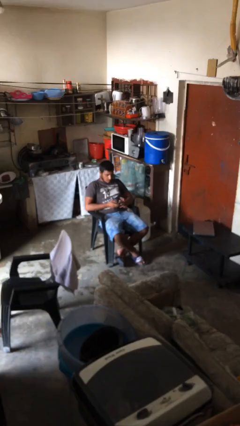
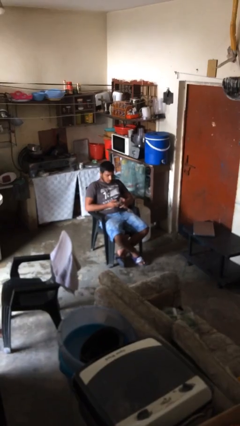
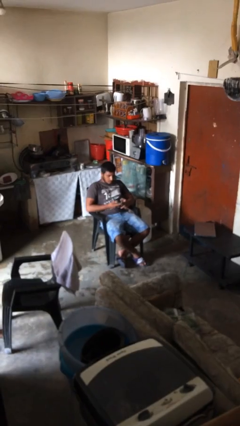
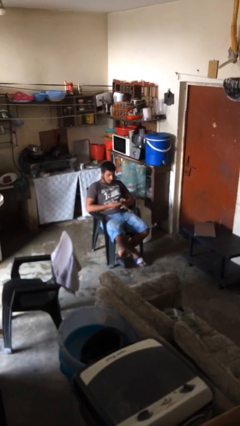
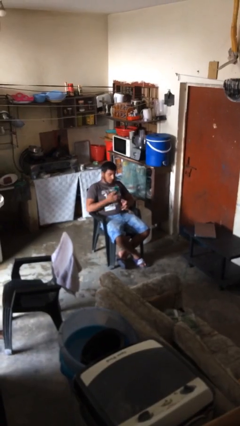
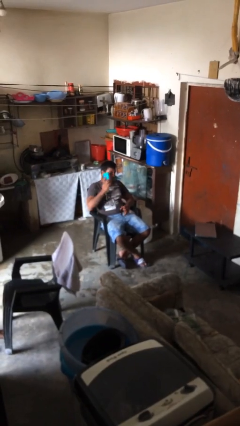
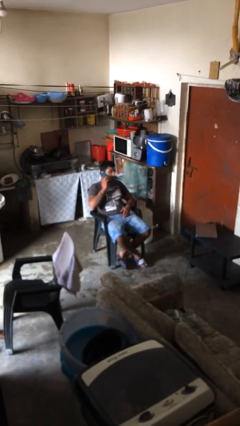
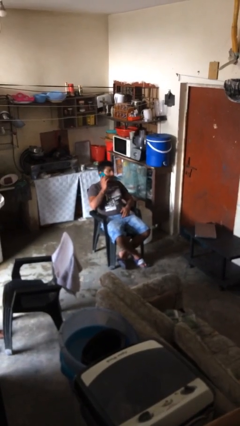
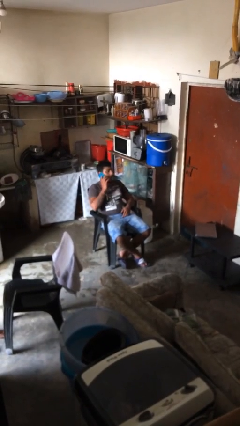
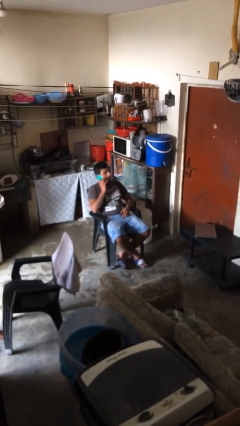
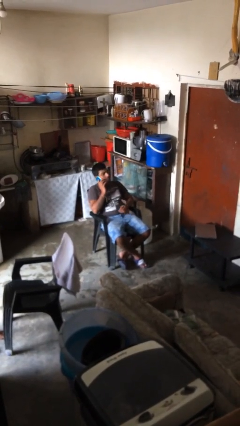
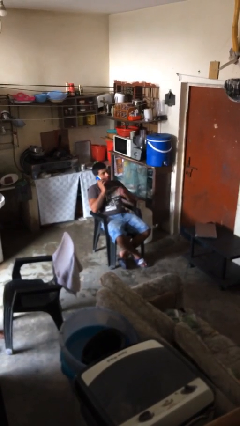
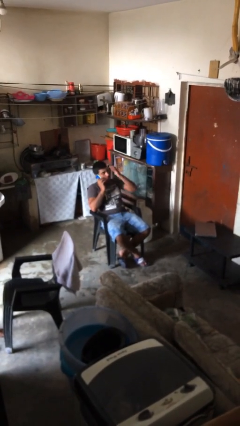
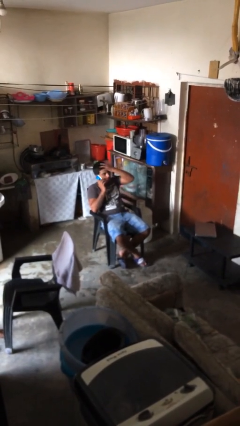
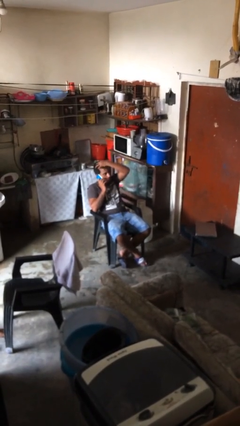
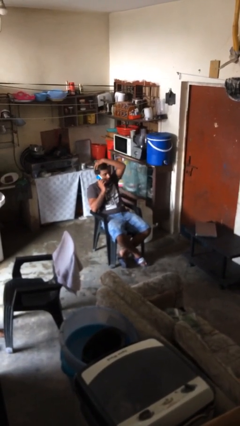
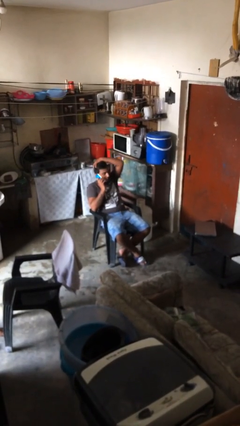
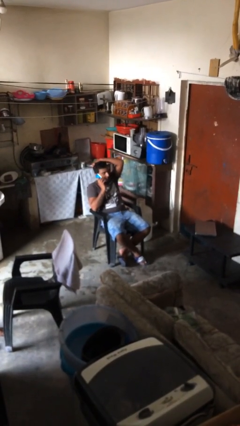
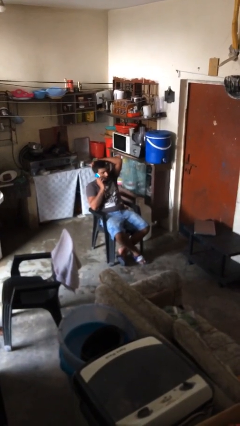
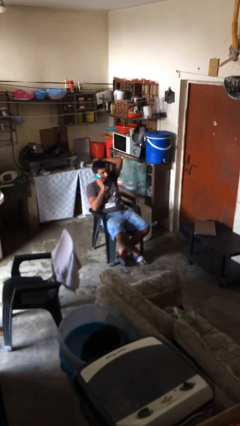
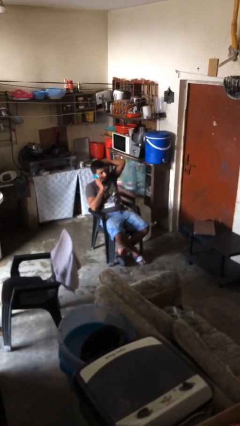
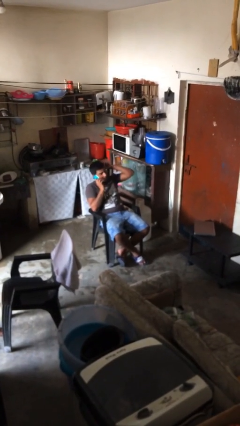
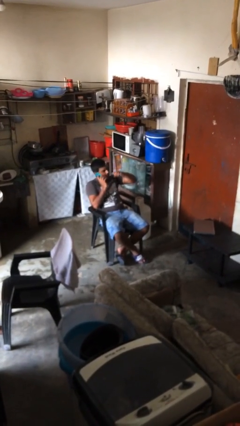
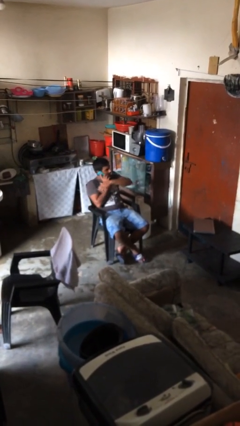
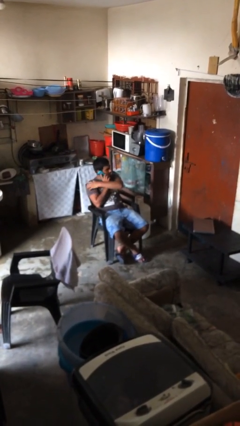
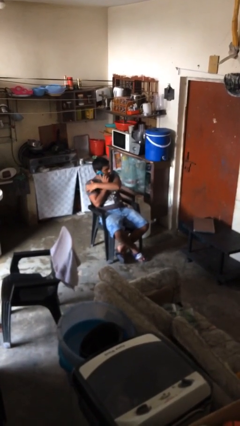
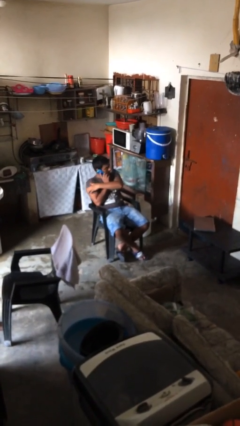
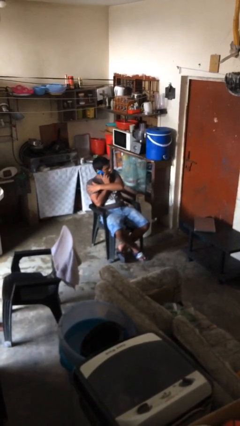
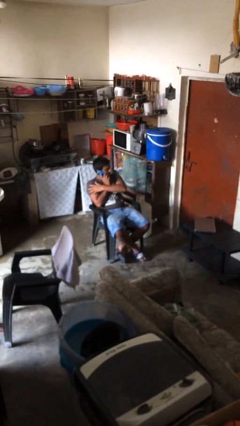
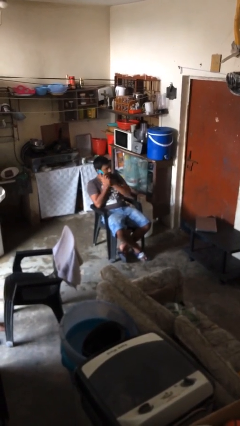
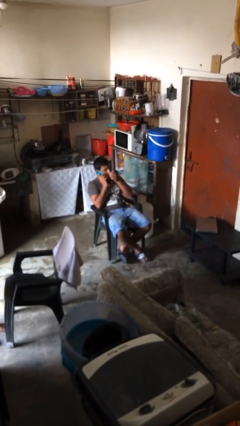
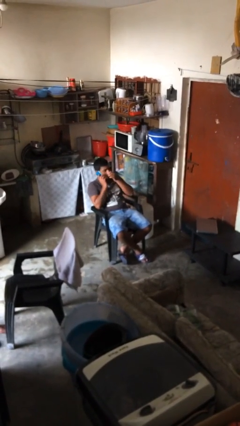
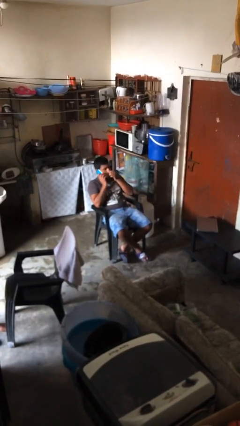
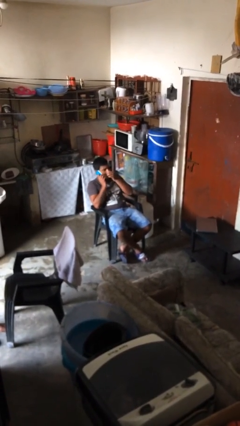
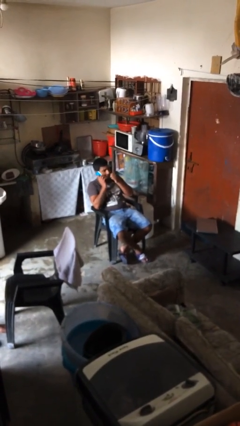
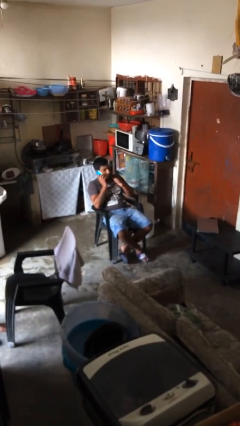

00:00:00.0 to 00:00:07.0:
person talks on phone

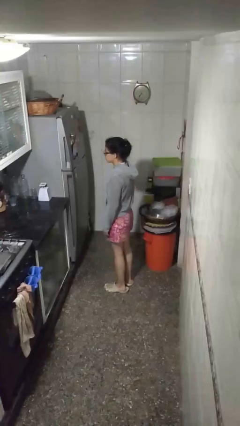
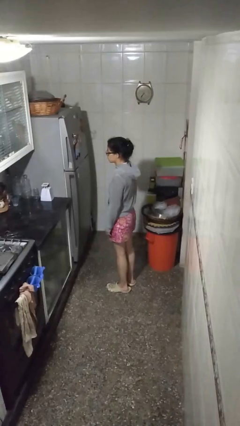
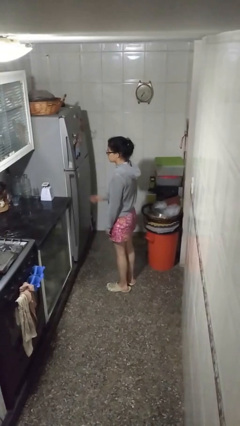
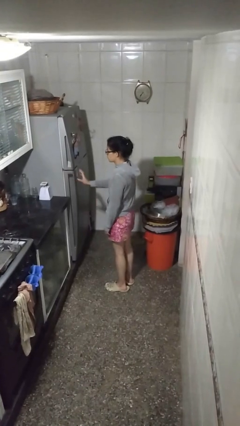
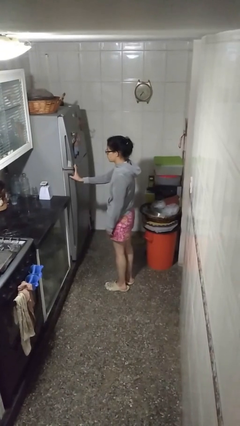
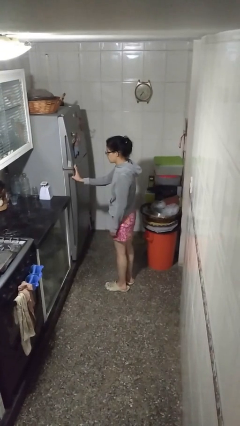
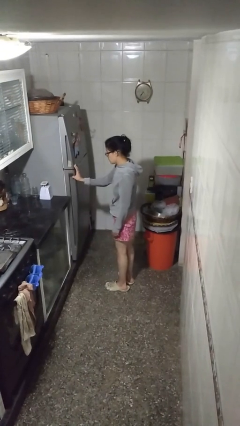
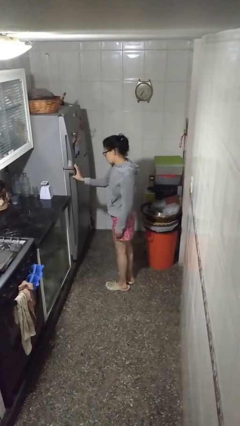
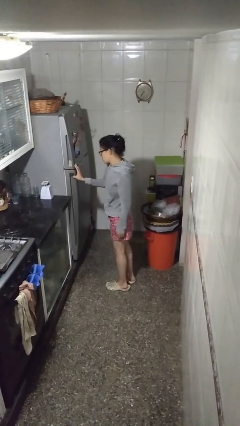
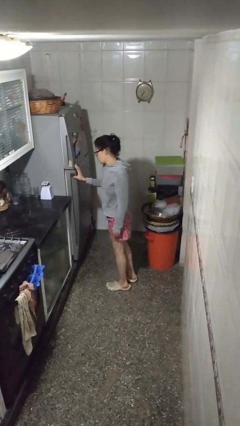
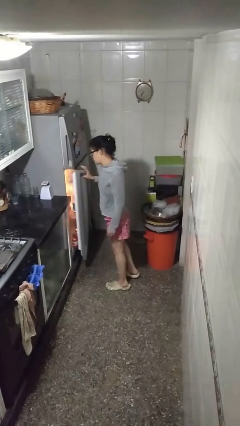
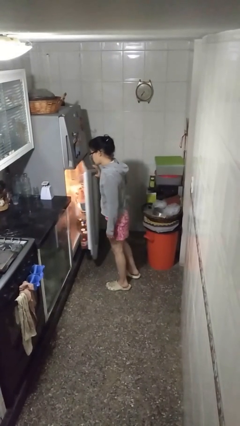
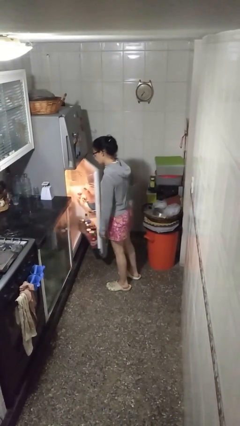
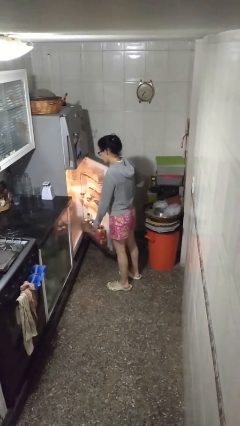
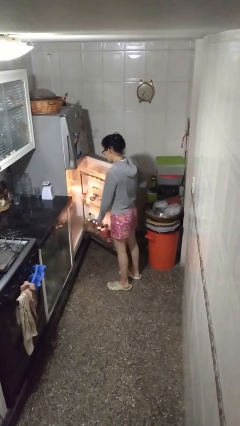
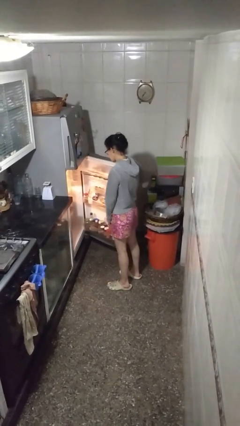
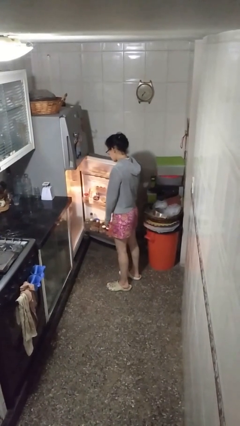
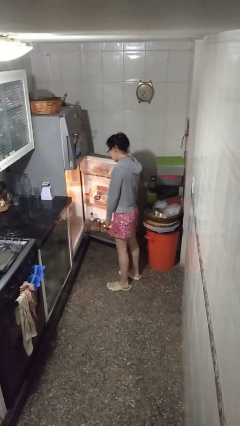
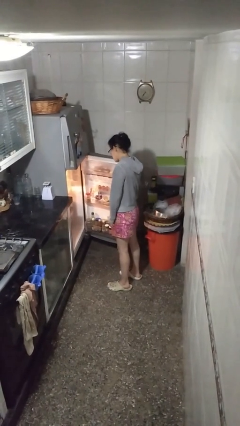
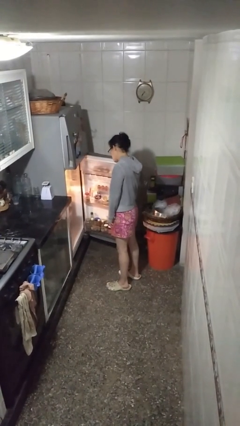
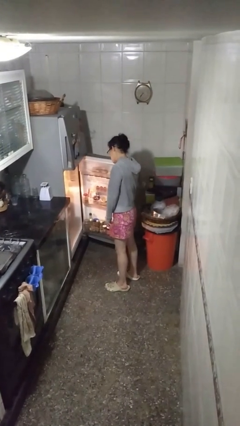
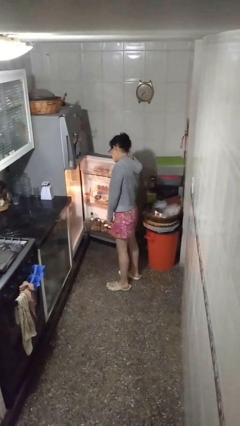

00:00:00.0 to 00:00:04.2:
person opens refrigerator

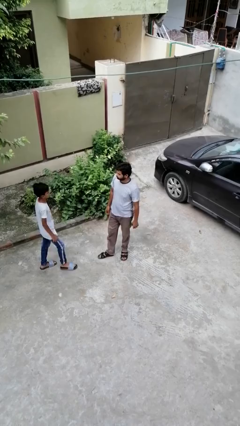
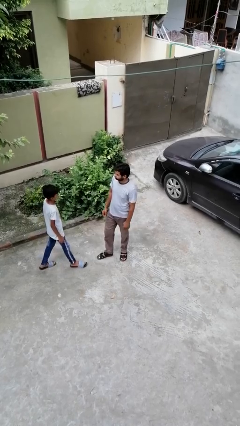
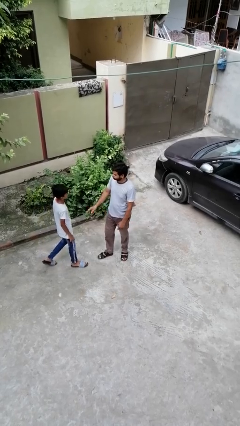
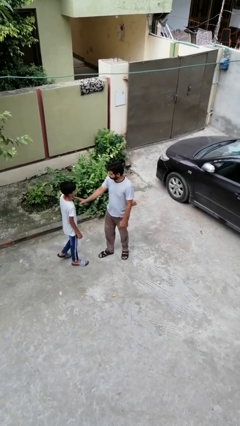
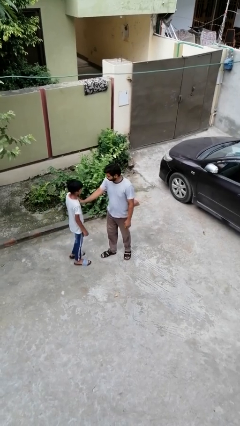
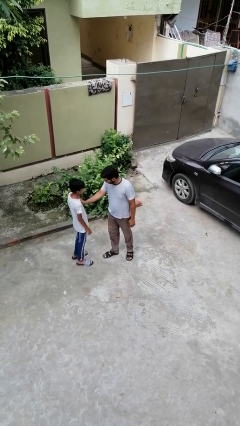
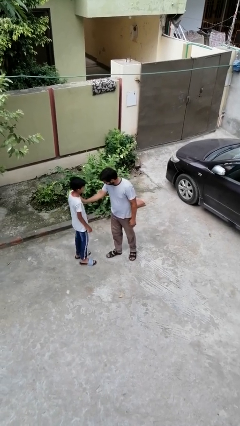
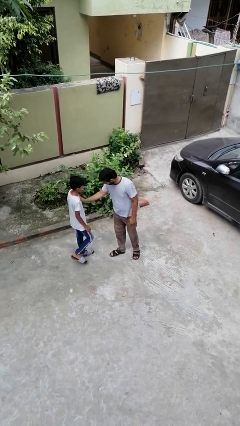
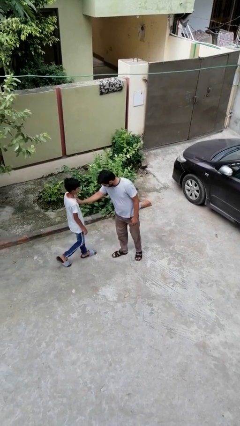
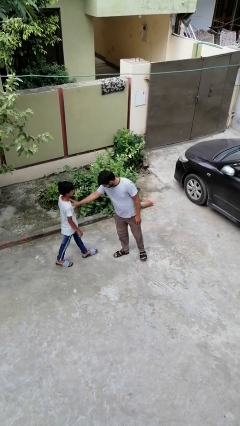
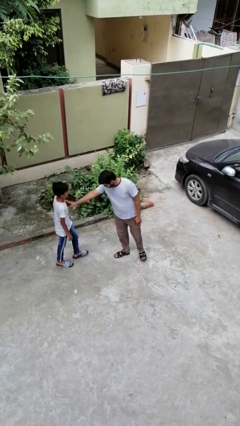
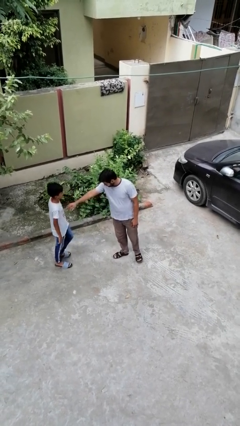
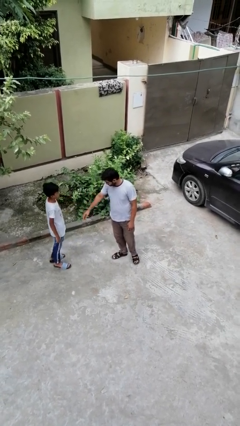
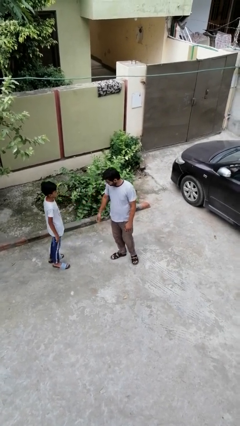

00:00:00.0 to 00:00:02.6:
person shoves person

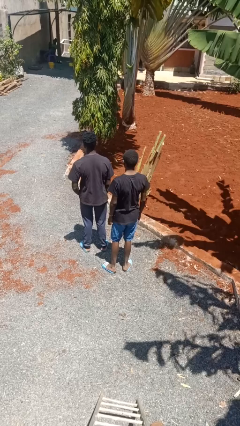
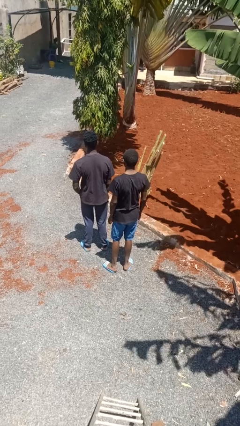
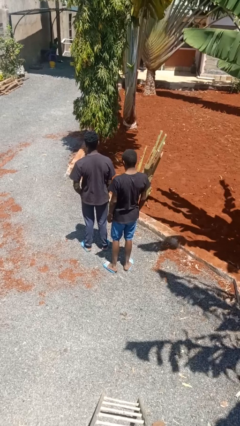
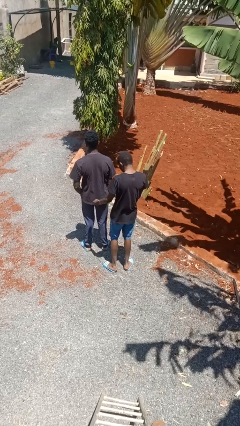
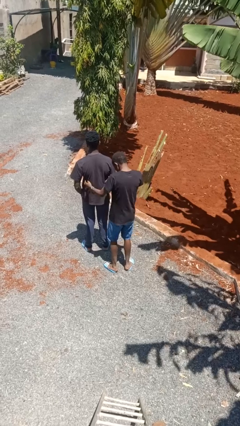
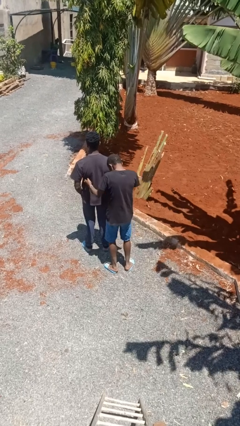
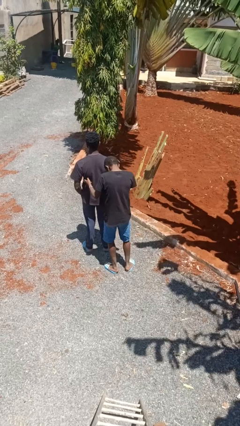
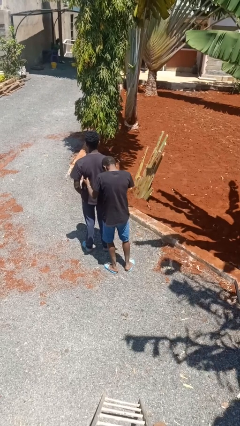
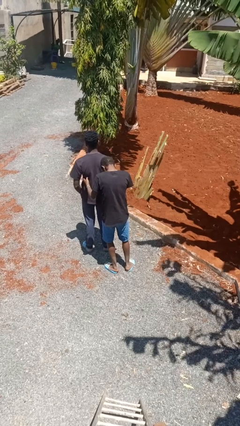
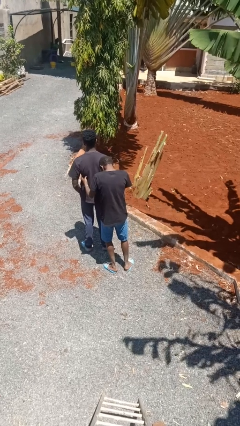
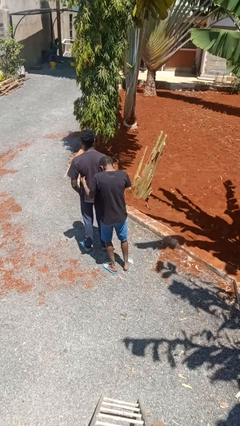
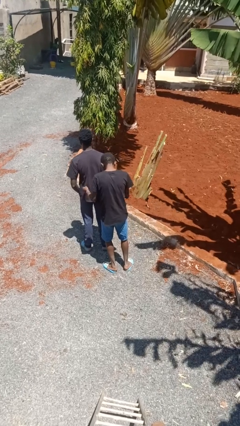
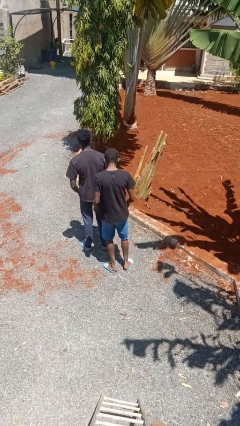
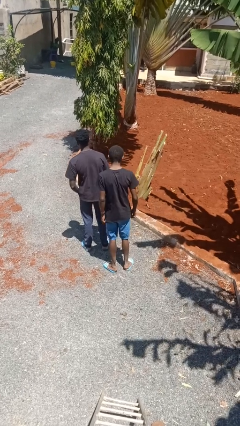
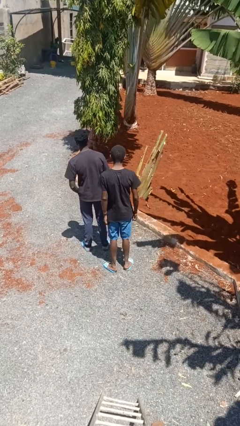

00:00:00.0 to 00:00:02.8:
person tickles person

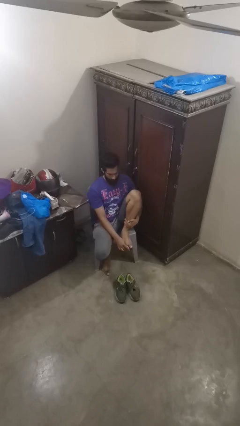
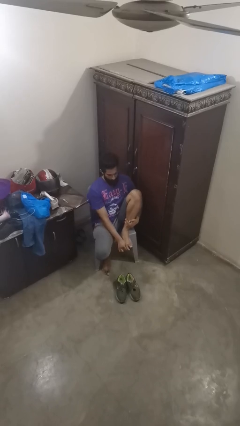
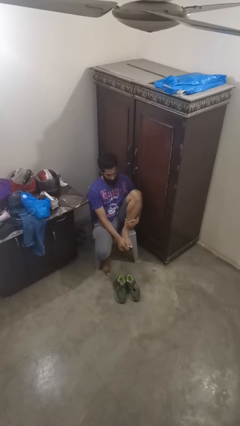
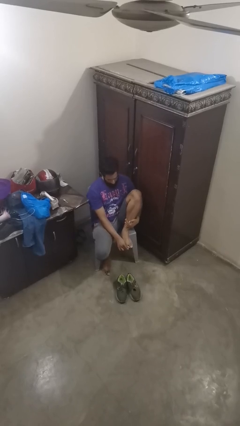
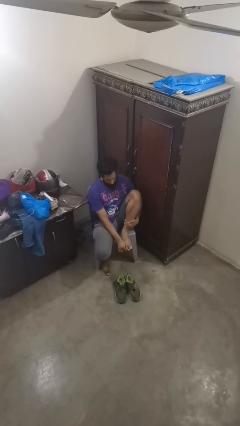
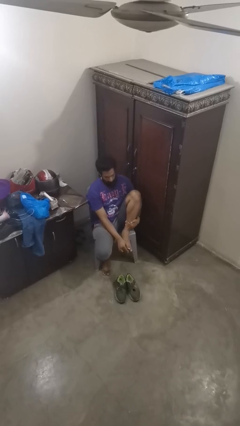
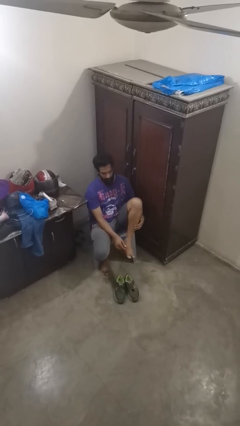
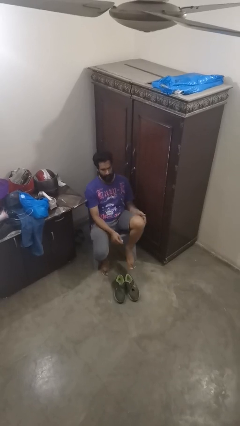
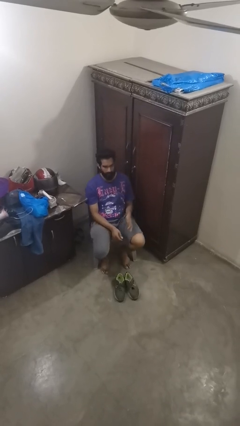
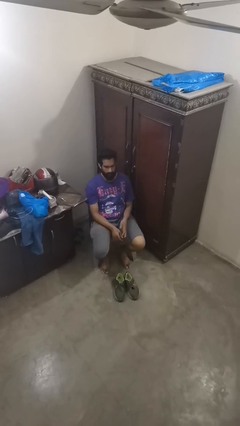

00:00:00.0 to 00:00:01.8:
person rubs foot
